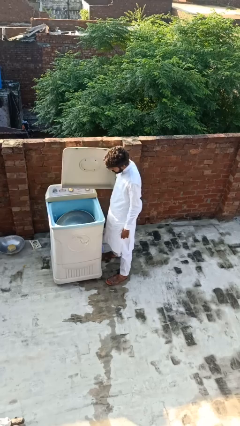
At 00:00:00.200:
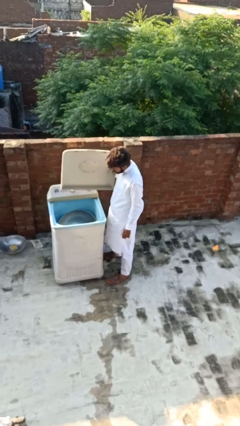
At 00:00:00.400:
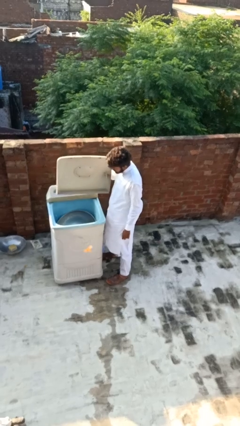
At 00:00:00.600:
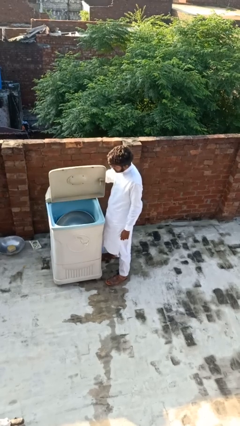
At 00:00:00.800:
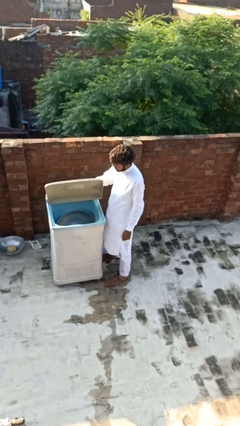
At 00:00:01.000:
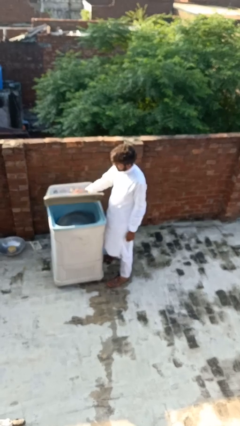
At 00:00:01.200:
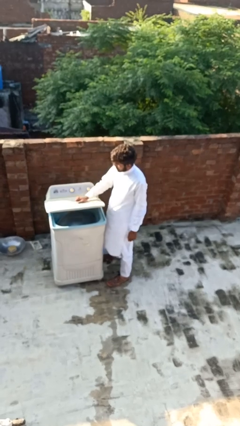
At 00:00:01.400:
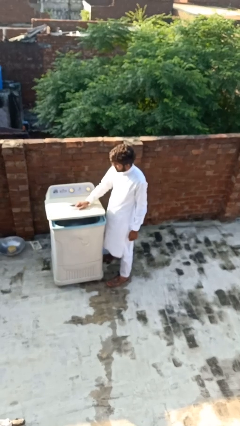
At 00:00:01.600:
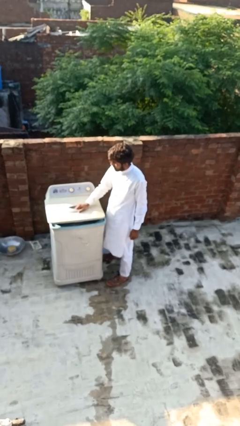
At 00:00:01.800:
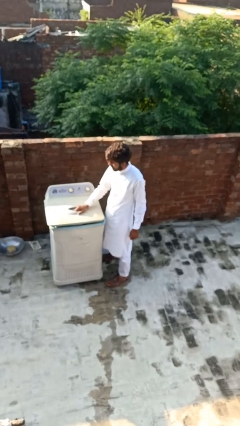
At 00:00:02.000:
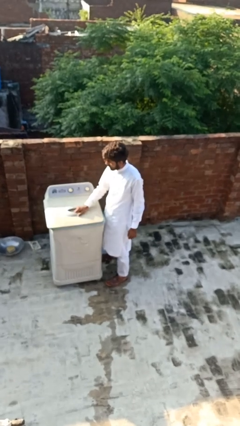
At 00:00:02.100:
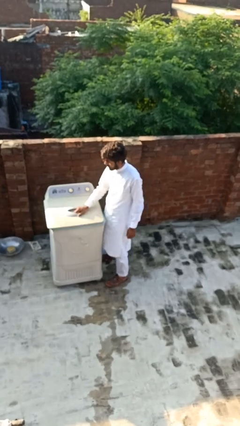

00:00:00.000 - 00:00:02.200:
person closes clothes washer

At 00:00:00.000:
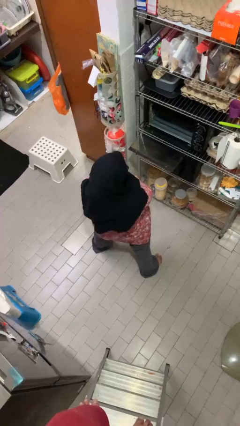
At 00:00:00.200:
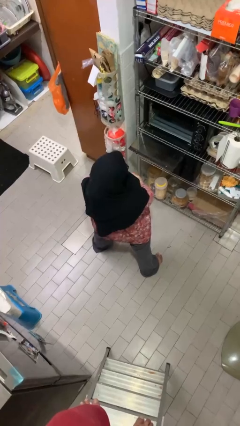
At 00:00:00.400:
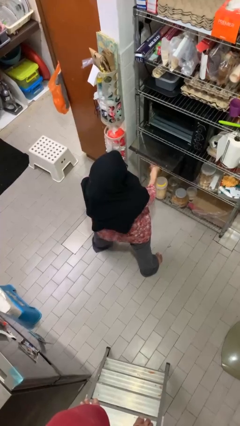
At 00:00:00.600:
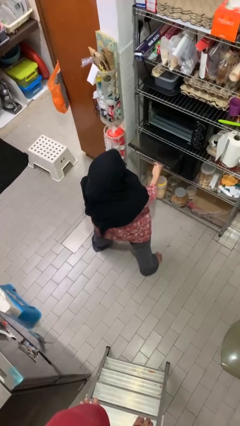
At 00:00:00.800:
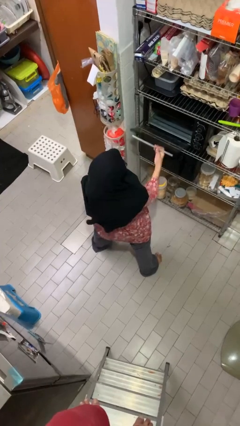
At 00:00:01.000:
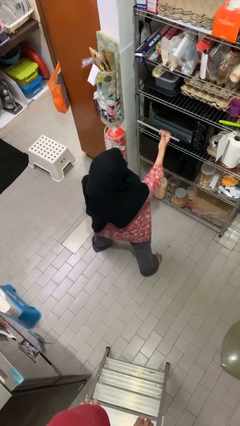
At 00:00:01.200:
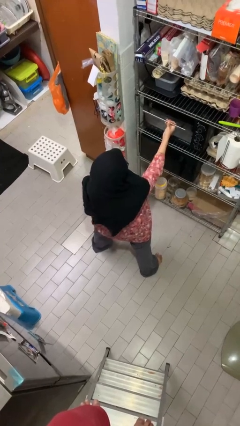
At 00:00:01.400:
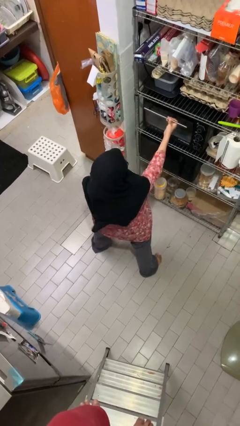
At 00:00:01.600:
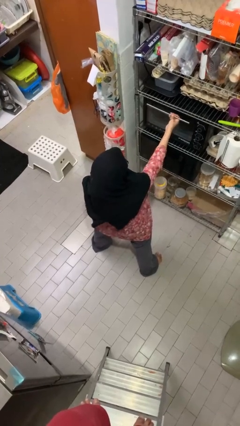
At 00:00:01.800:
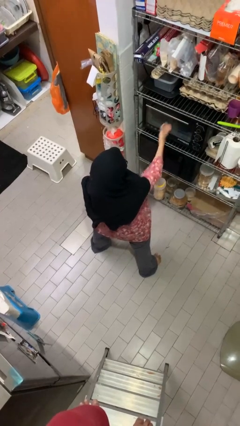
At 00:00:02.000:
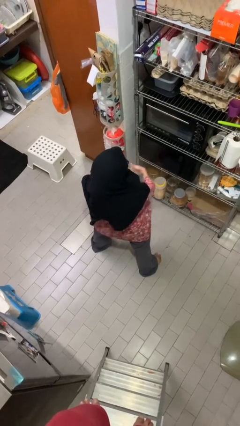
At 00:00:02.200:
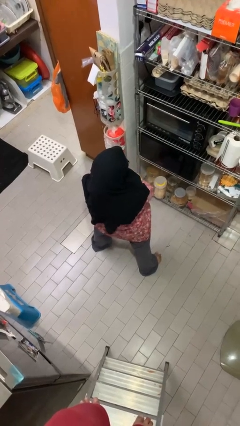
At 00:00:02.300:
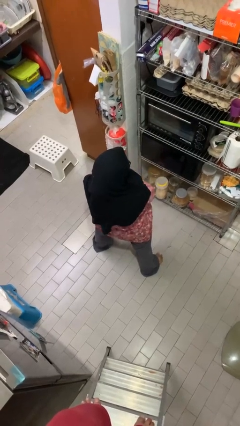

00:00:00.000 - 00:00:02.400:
person closes oven door

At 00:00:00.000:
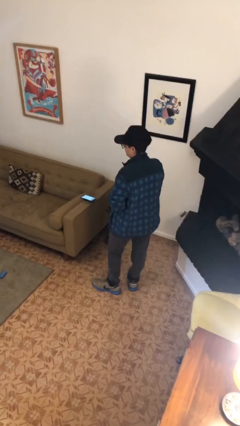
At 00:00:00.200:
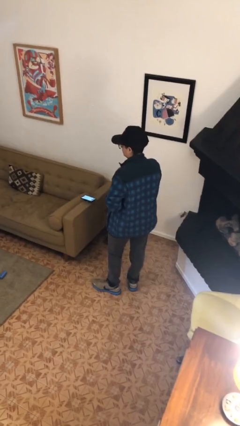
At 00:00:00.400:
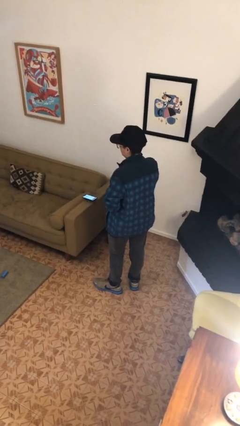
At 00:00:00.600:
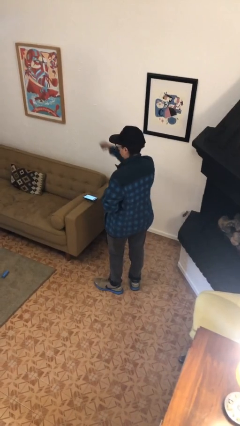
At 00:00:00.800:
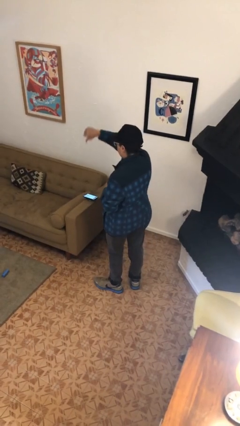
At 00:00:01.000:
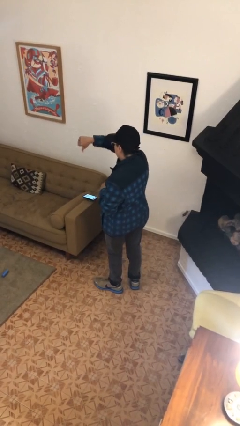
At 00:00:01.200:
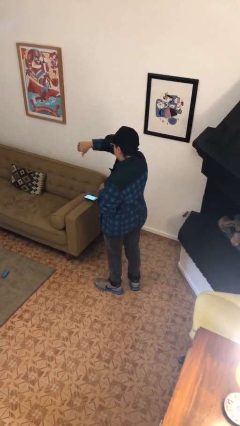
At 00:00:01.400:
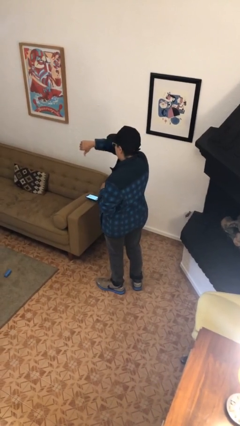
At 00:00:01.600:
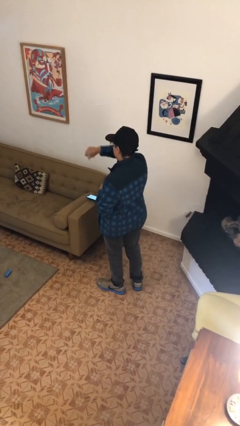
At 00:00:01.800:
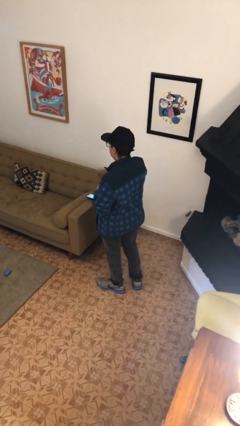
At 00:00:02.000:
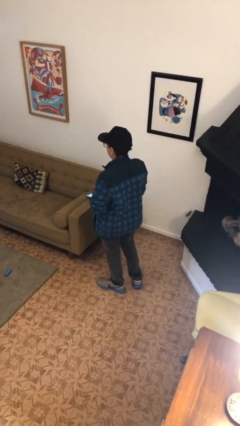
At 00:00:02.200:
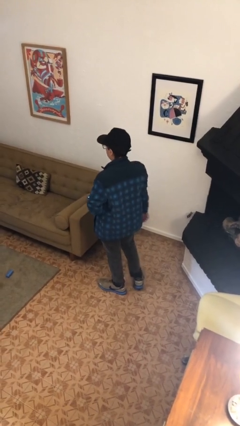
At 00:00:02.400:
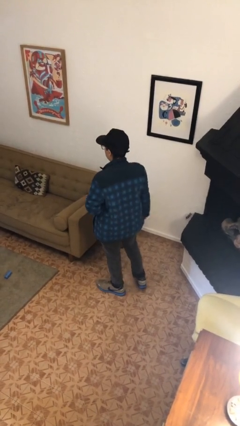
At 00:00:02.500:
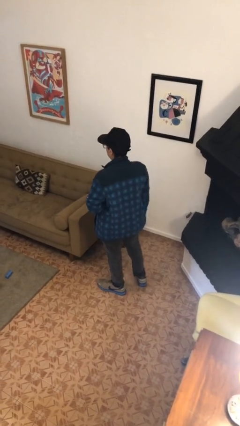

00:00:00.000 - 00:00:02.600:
person gestures thumbs down

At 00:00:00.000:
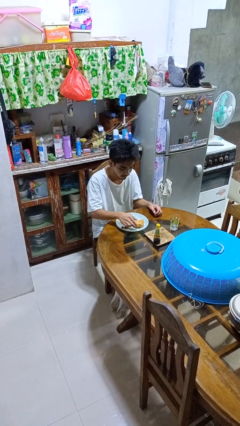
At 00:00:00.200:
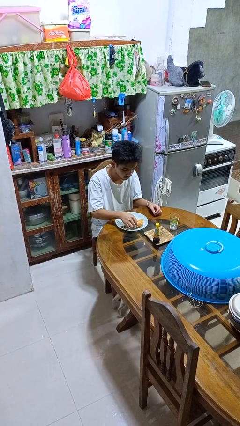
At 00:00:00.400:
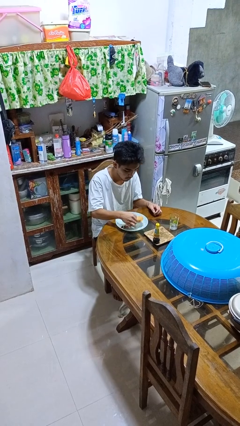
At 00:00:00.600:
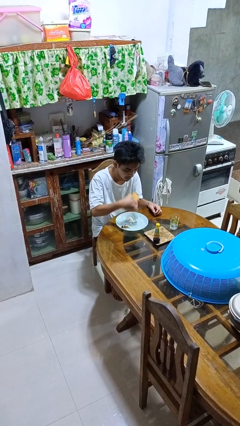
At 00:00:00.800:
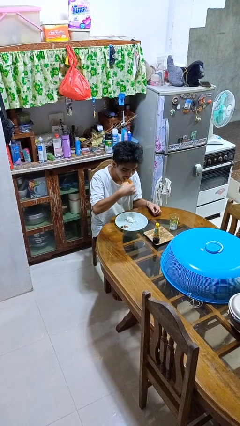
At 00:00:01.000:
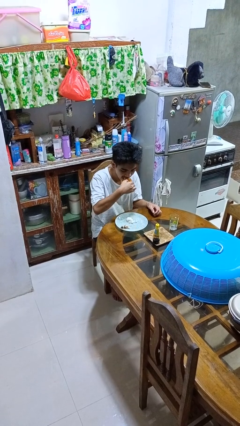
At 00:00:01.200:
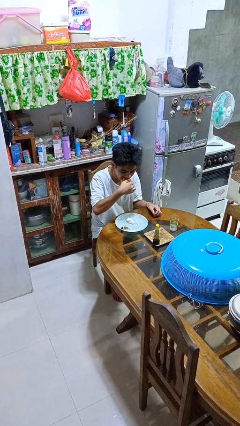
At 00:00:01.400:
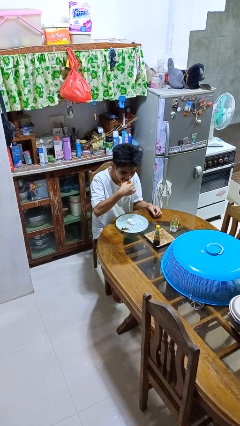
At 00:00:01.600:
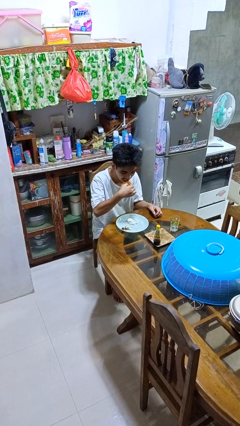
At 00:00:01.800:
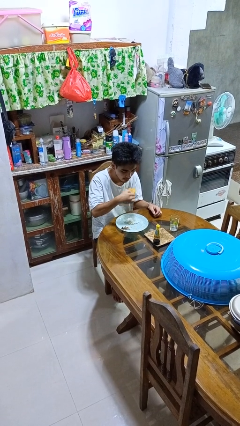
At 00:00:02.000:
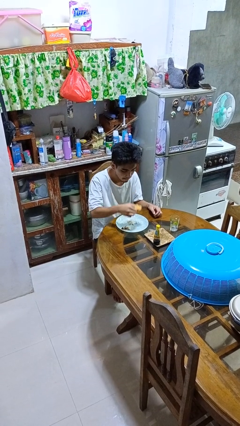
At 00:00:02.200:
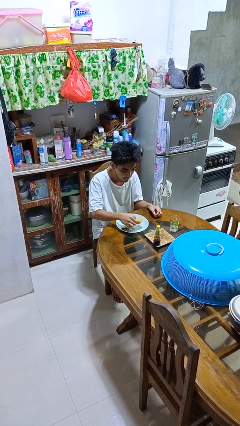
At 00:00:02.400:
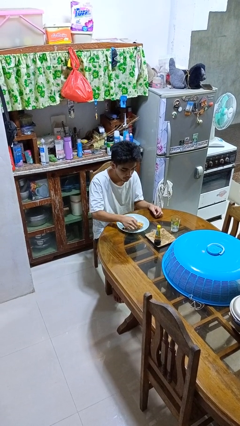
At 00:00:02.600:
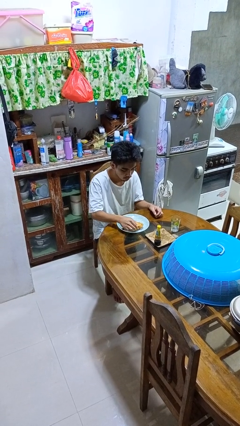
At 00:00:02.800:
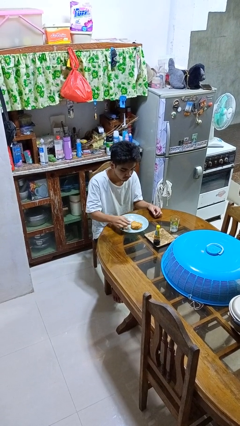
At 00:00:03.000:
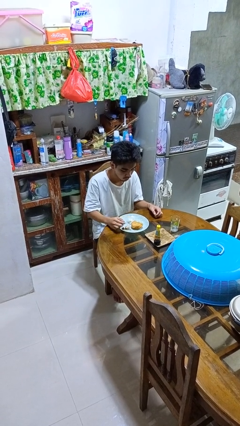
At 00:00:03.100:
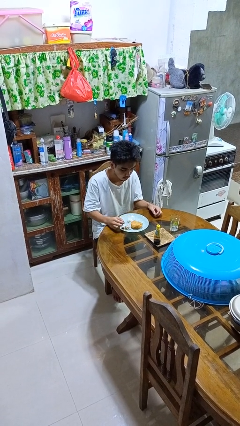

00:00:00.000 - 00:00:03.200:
person eats with hands

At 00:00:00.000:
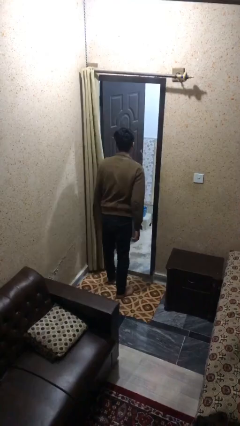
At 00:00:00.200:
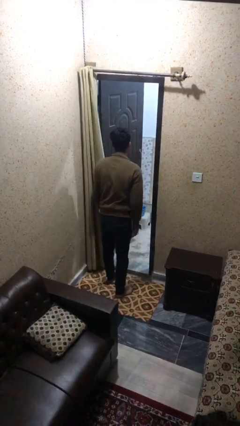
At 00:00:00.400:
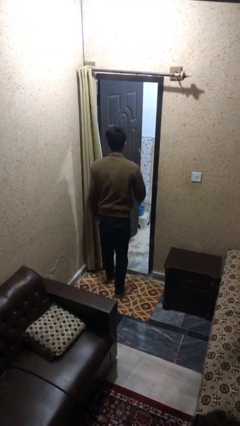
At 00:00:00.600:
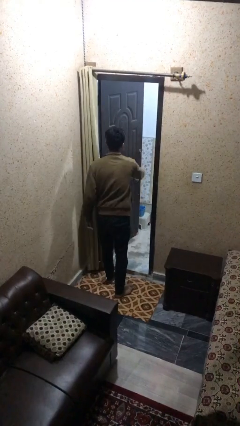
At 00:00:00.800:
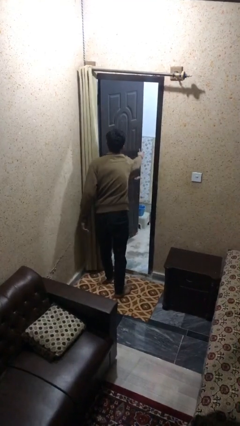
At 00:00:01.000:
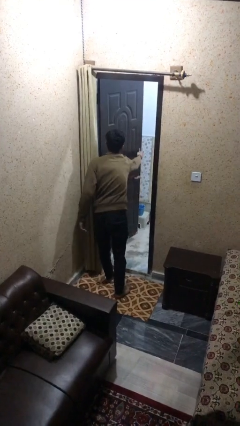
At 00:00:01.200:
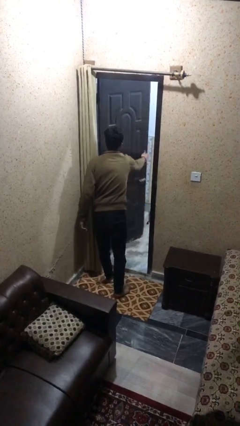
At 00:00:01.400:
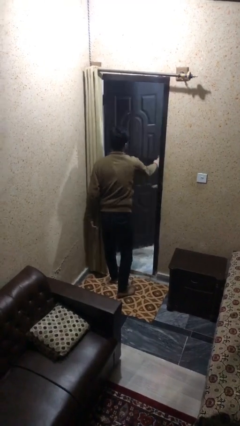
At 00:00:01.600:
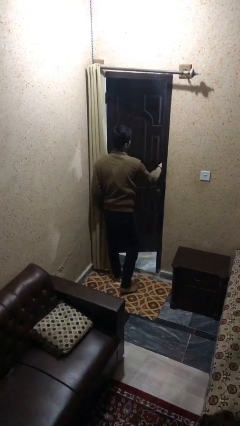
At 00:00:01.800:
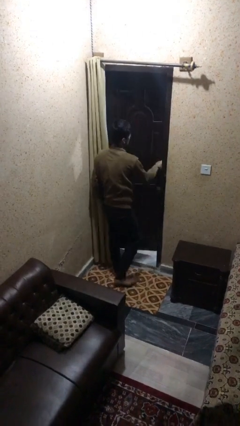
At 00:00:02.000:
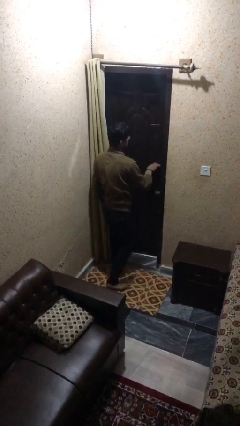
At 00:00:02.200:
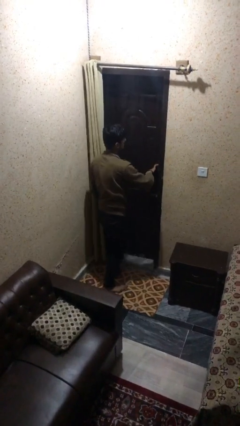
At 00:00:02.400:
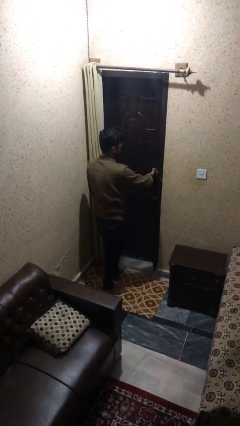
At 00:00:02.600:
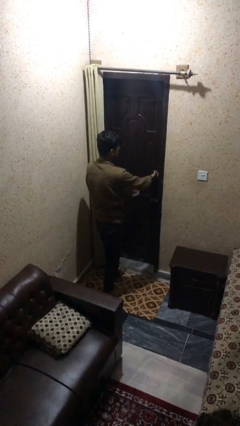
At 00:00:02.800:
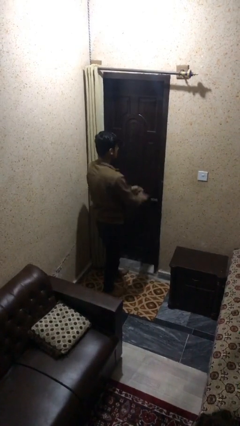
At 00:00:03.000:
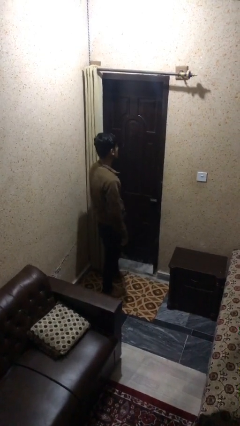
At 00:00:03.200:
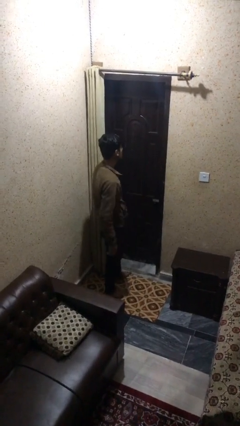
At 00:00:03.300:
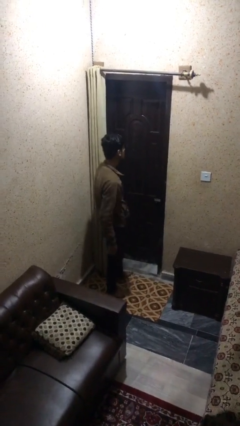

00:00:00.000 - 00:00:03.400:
person closes facility door

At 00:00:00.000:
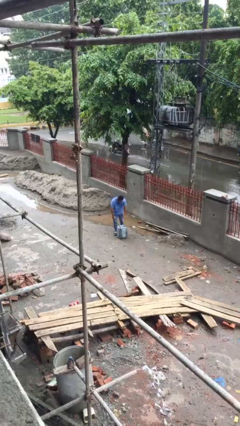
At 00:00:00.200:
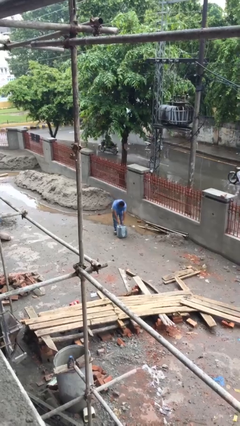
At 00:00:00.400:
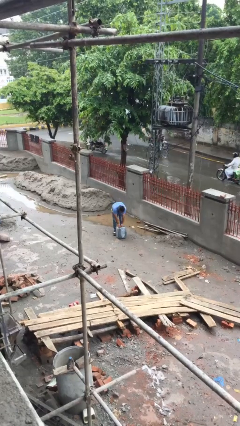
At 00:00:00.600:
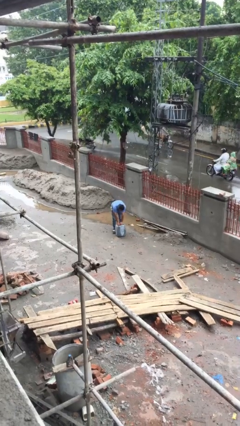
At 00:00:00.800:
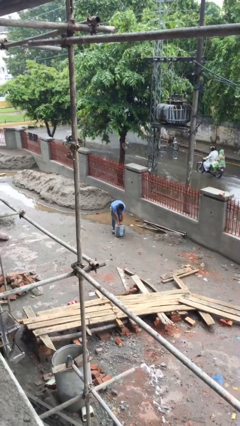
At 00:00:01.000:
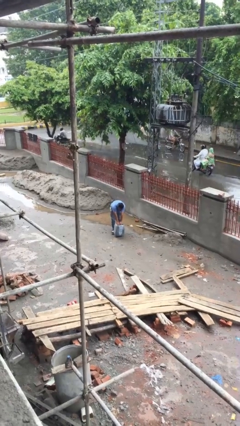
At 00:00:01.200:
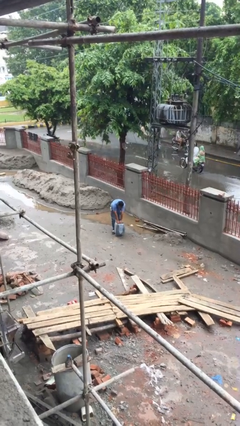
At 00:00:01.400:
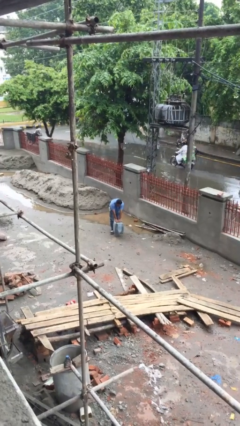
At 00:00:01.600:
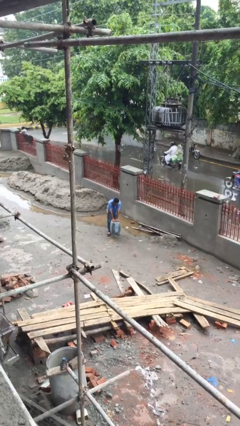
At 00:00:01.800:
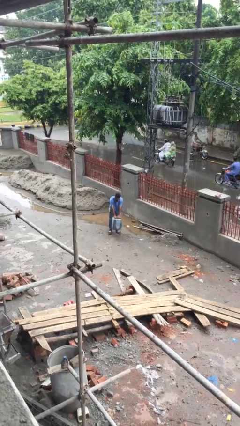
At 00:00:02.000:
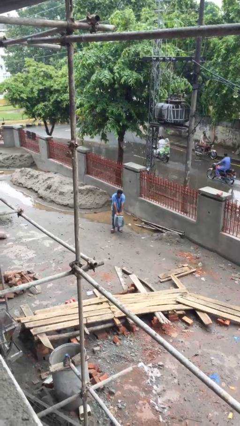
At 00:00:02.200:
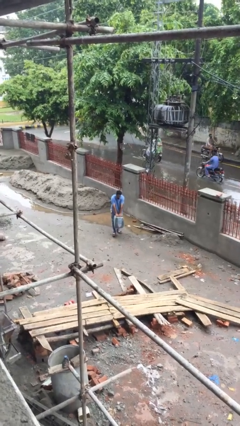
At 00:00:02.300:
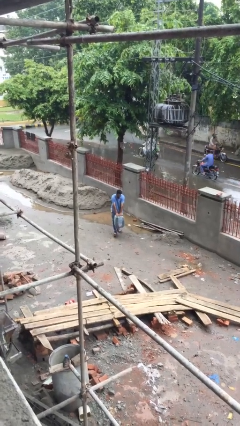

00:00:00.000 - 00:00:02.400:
person picks up object from floor

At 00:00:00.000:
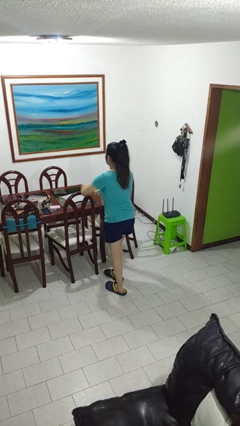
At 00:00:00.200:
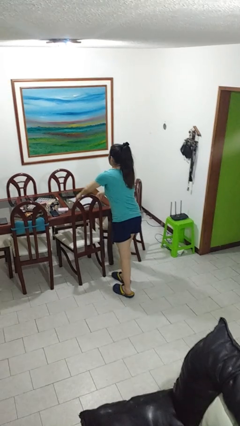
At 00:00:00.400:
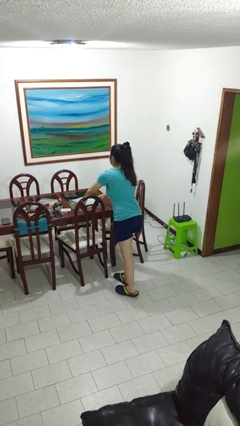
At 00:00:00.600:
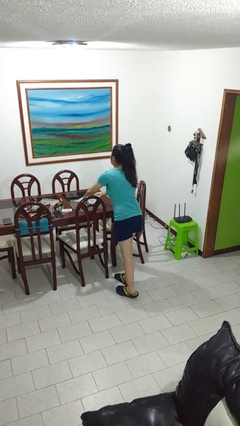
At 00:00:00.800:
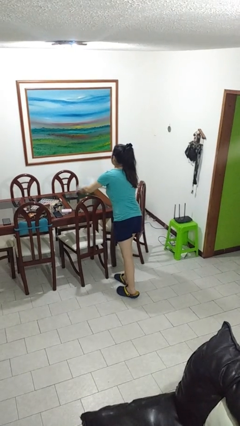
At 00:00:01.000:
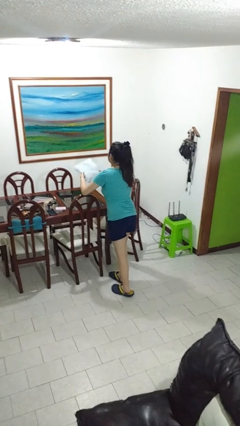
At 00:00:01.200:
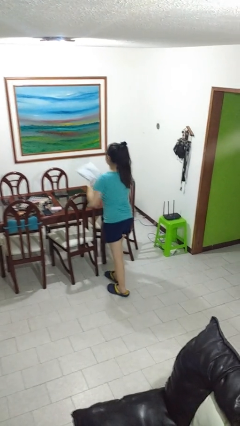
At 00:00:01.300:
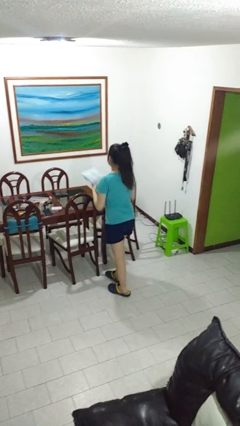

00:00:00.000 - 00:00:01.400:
person picks up object from table
